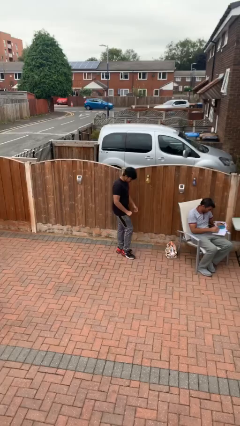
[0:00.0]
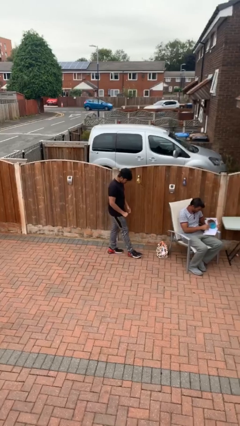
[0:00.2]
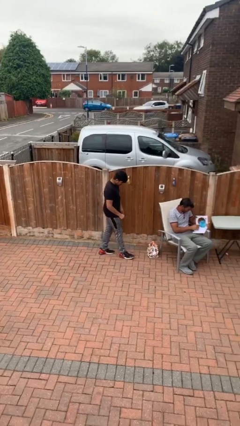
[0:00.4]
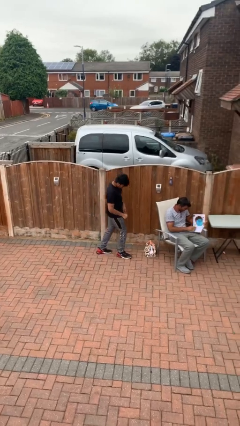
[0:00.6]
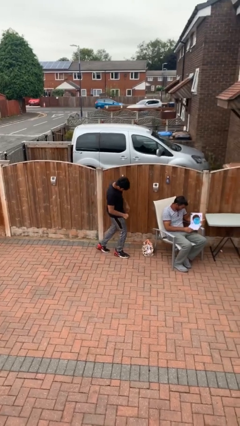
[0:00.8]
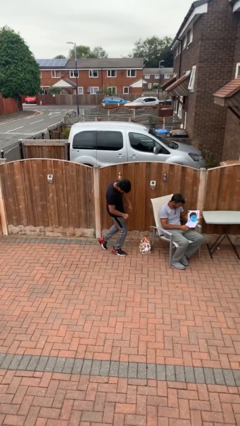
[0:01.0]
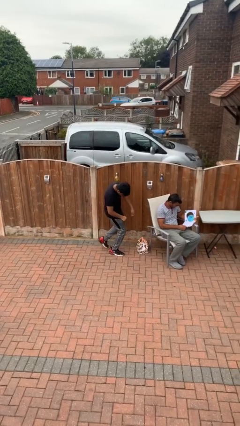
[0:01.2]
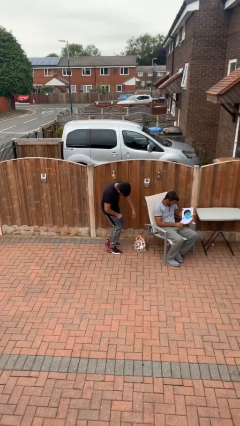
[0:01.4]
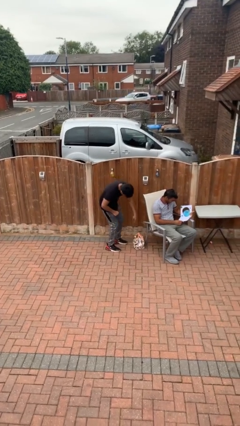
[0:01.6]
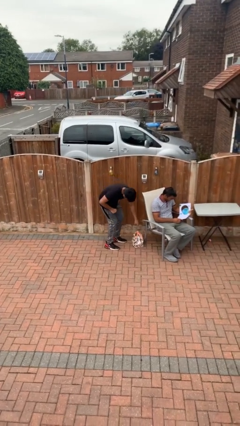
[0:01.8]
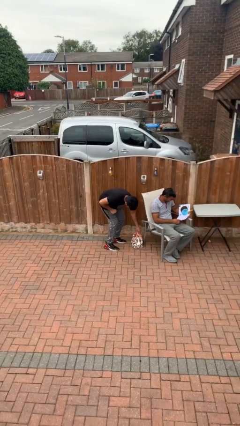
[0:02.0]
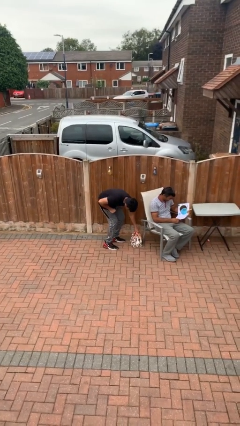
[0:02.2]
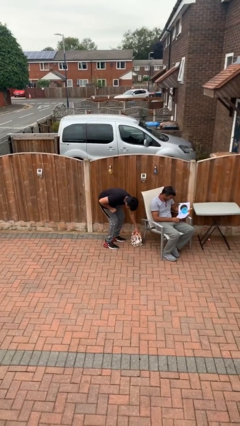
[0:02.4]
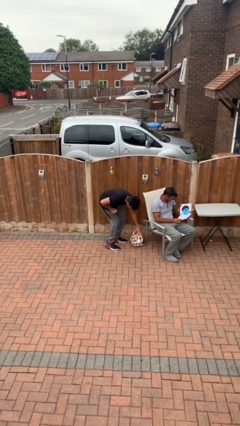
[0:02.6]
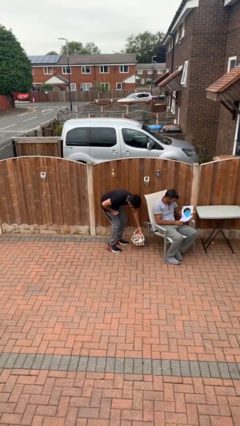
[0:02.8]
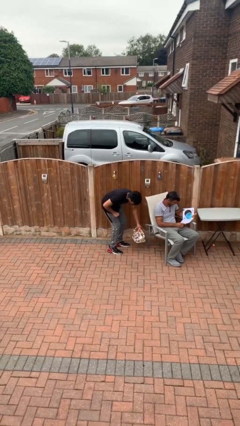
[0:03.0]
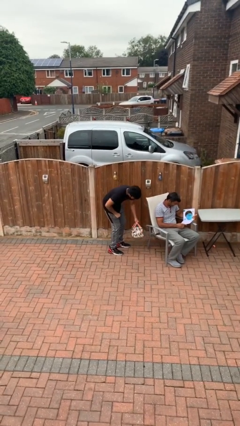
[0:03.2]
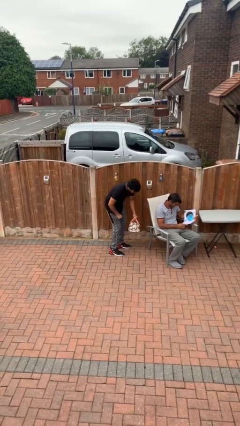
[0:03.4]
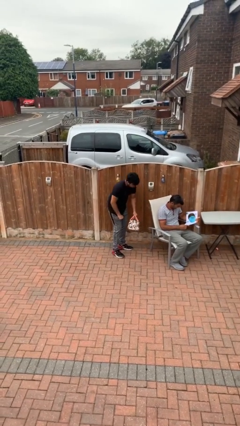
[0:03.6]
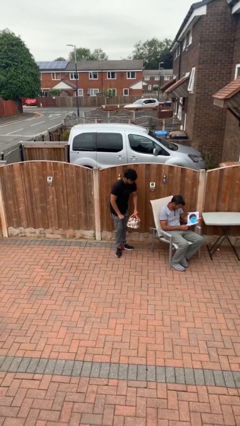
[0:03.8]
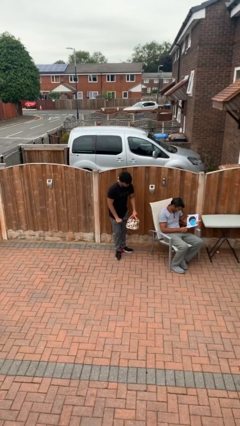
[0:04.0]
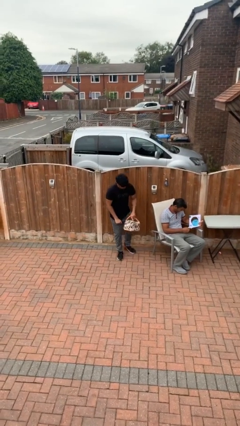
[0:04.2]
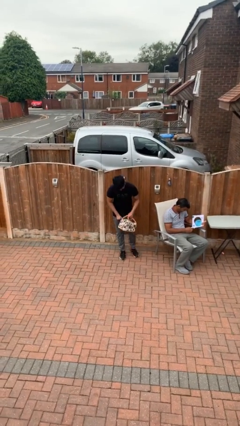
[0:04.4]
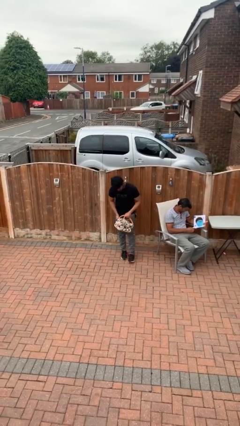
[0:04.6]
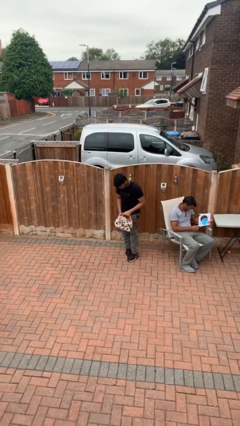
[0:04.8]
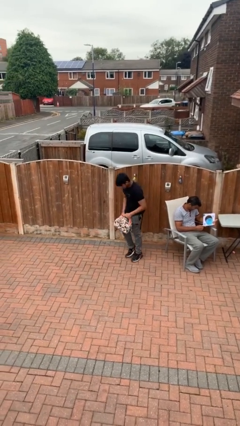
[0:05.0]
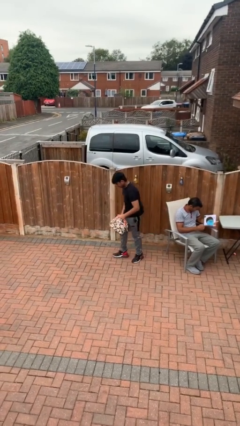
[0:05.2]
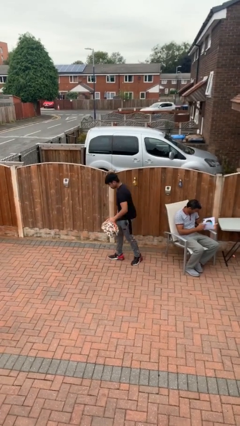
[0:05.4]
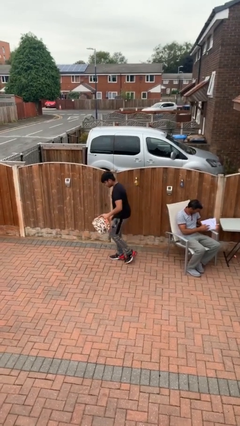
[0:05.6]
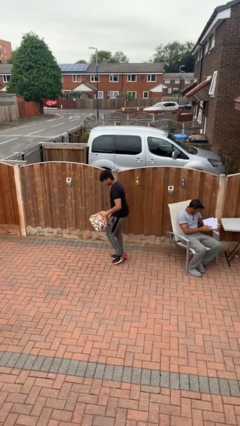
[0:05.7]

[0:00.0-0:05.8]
person steals object from person

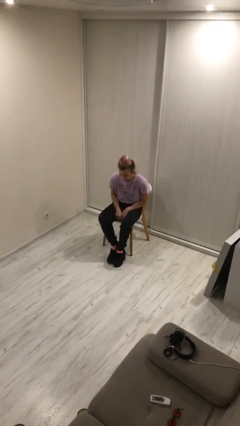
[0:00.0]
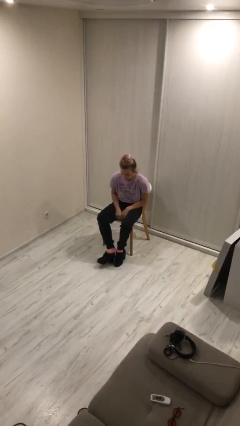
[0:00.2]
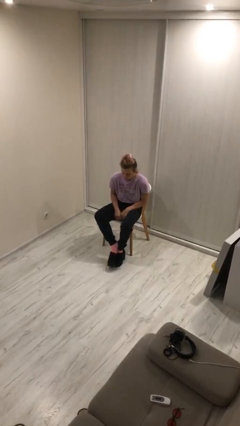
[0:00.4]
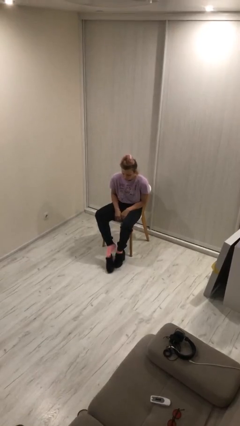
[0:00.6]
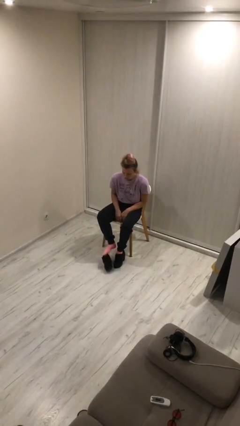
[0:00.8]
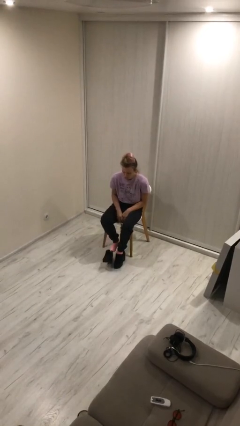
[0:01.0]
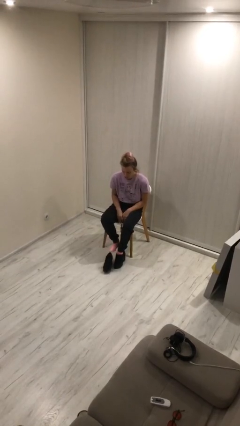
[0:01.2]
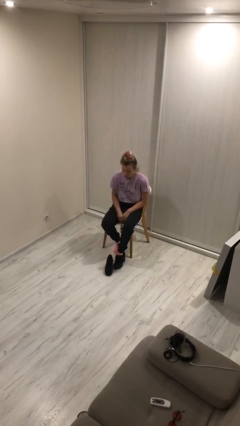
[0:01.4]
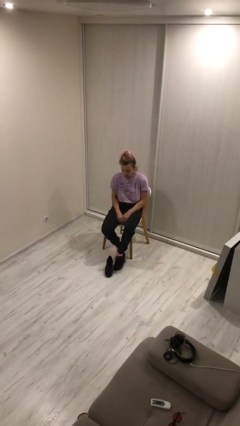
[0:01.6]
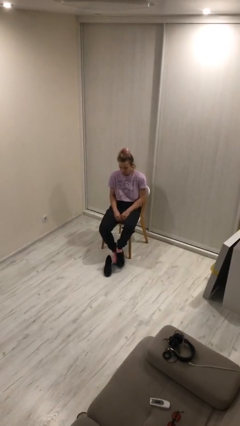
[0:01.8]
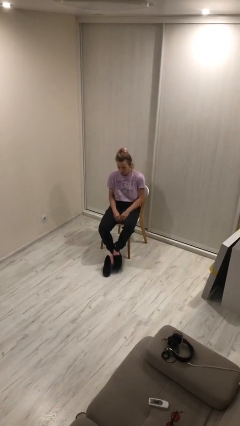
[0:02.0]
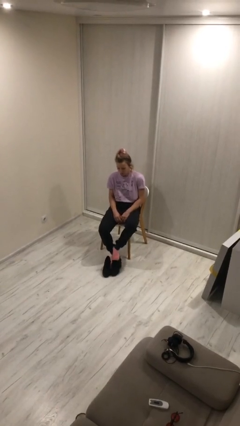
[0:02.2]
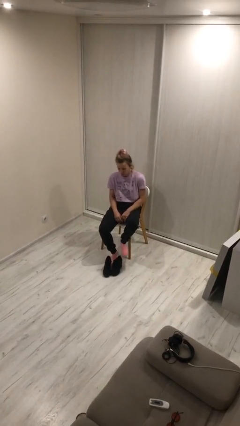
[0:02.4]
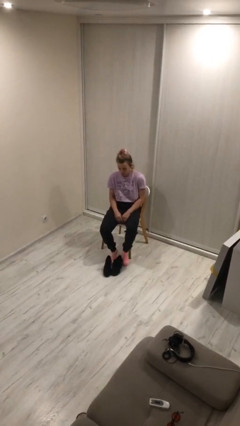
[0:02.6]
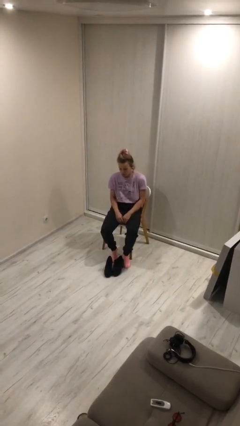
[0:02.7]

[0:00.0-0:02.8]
person takes off shoes

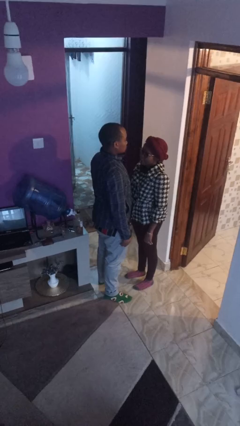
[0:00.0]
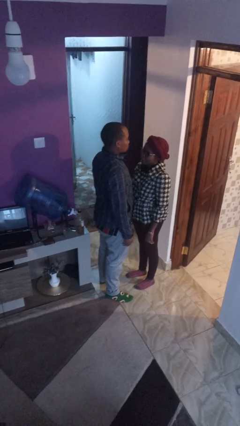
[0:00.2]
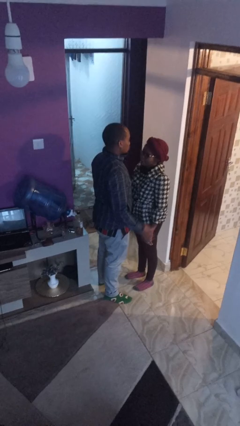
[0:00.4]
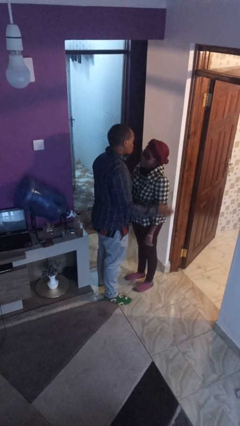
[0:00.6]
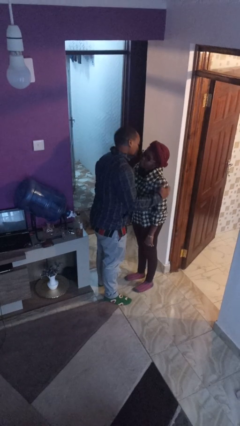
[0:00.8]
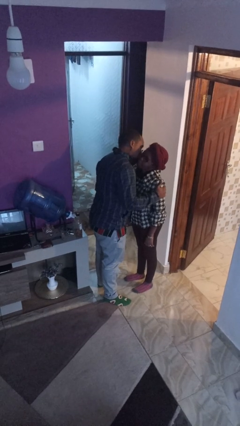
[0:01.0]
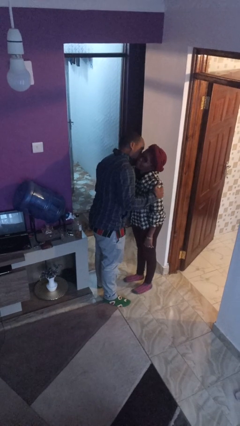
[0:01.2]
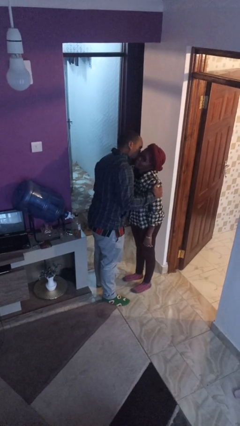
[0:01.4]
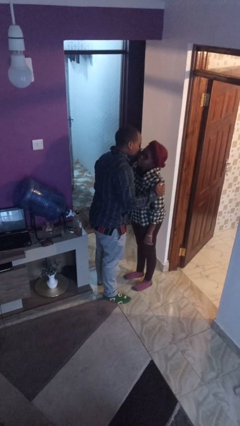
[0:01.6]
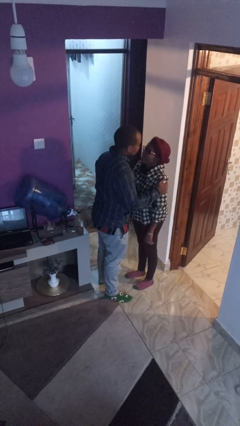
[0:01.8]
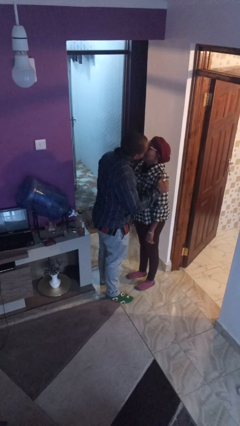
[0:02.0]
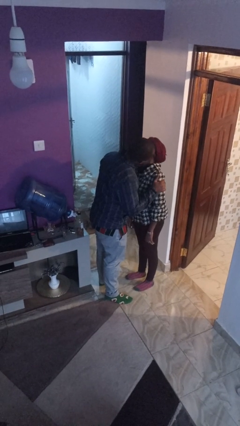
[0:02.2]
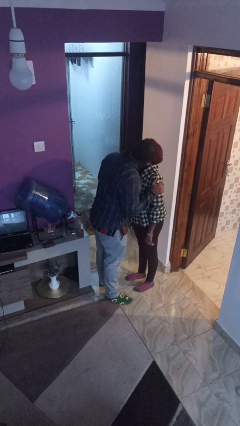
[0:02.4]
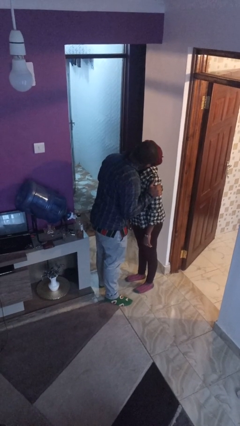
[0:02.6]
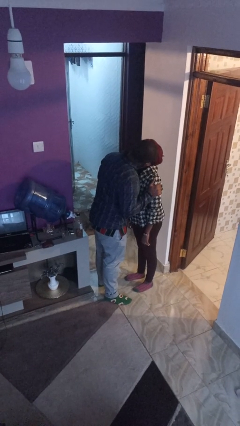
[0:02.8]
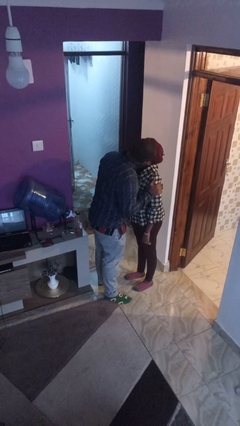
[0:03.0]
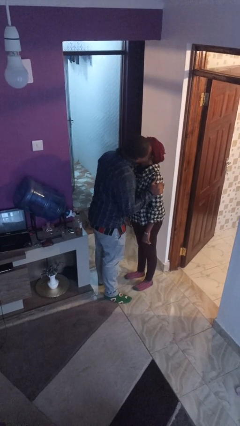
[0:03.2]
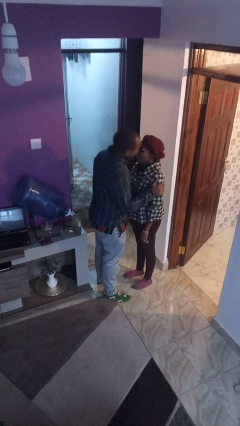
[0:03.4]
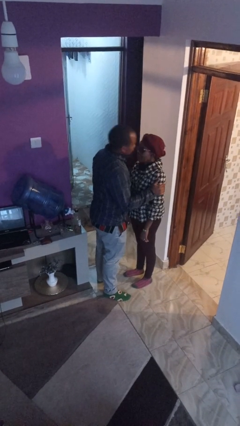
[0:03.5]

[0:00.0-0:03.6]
person kisses cheek of person

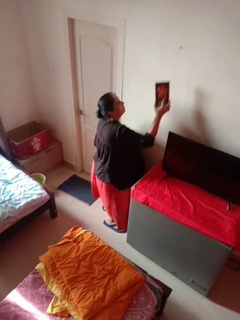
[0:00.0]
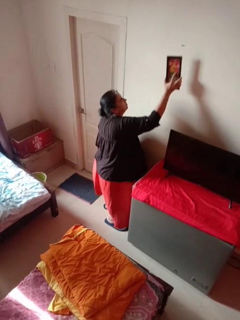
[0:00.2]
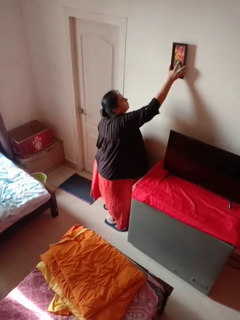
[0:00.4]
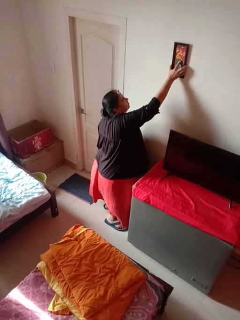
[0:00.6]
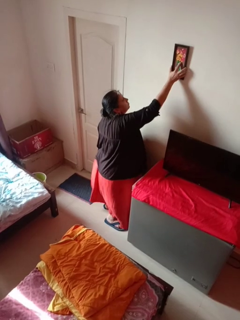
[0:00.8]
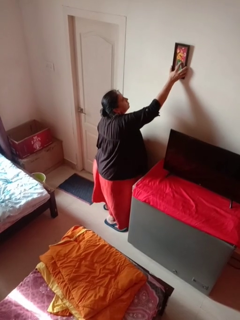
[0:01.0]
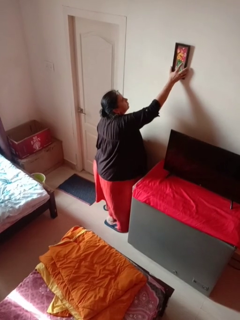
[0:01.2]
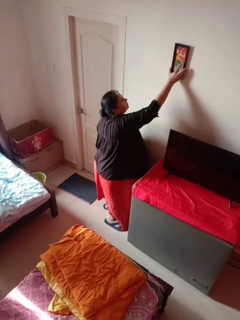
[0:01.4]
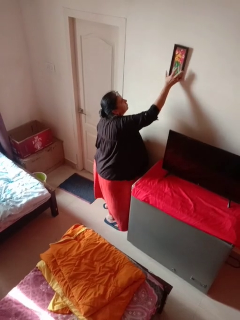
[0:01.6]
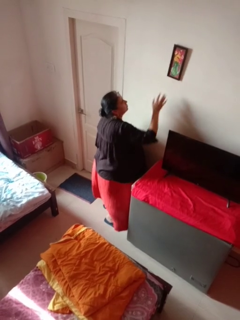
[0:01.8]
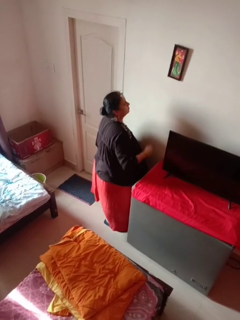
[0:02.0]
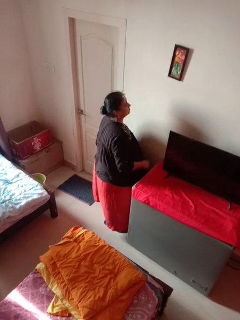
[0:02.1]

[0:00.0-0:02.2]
person puts up picture frame

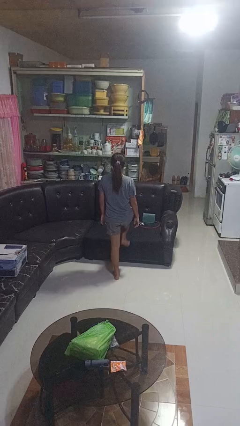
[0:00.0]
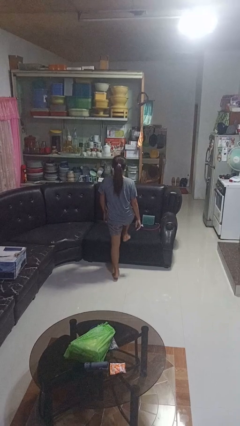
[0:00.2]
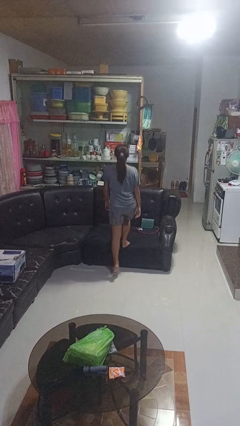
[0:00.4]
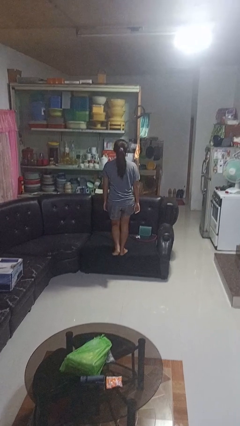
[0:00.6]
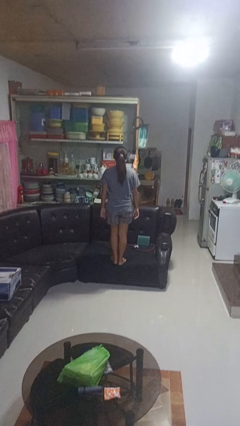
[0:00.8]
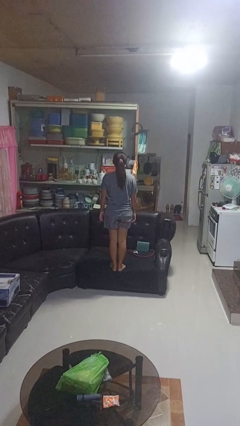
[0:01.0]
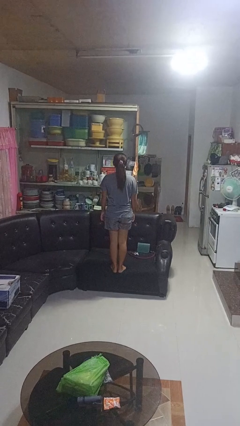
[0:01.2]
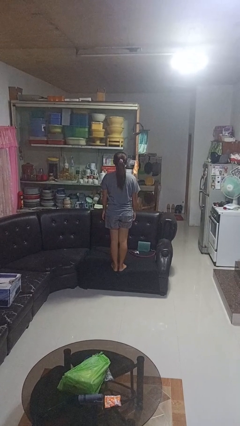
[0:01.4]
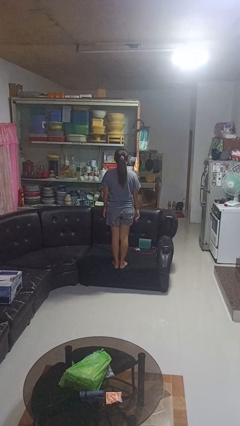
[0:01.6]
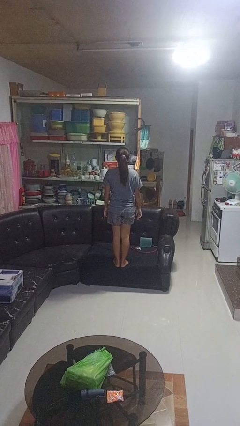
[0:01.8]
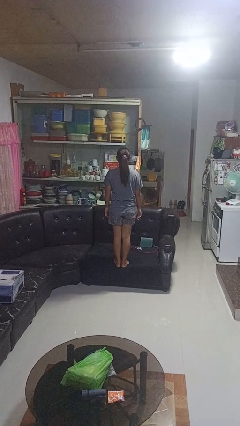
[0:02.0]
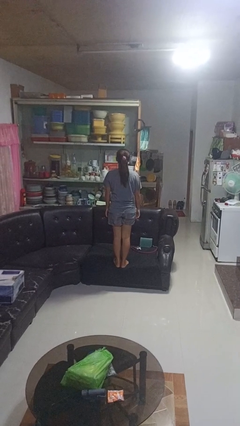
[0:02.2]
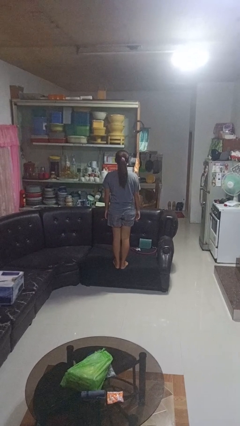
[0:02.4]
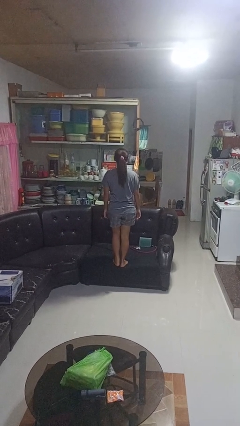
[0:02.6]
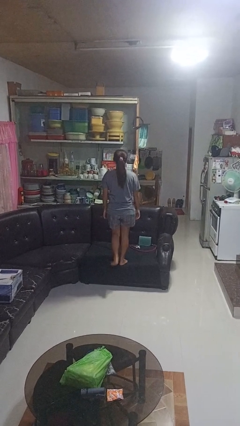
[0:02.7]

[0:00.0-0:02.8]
person climbs on couch

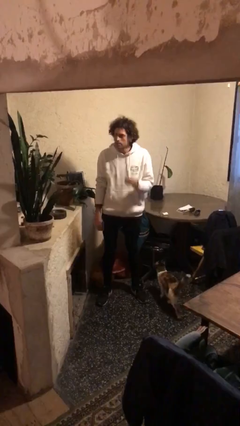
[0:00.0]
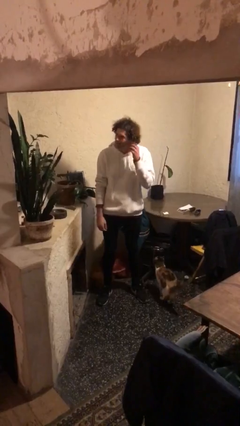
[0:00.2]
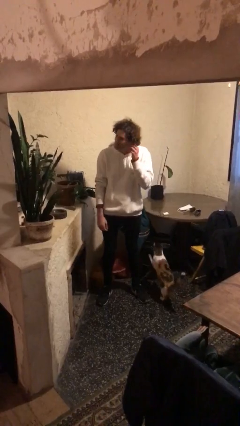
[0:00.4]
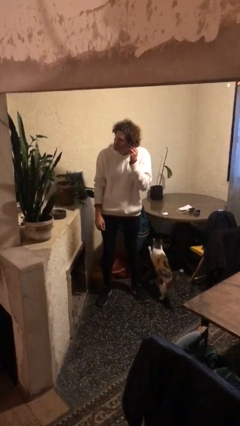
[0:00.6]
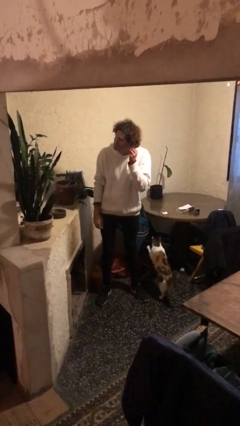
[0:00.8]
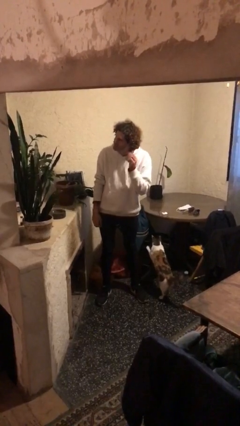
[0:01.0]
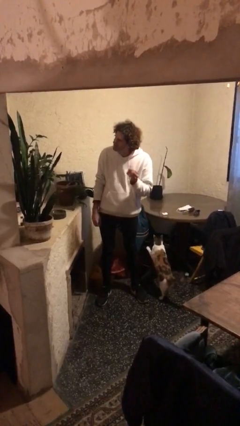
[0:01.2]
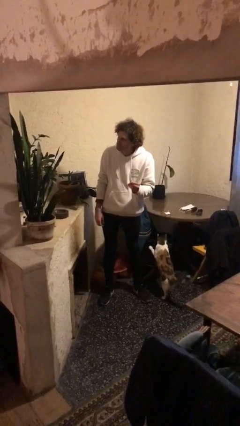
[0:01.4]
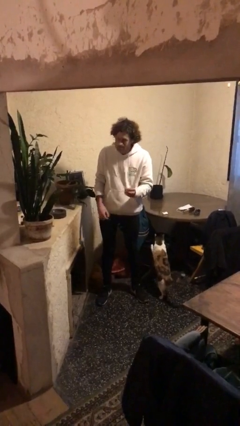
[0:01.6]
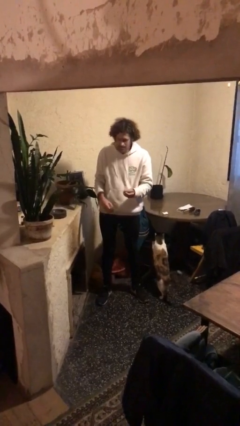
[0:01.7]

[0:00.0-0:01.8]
person takes off earrings
